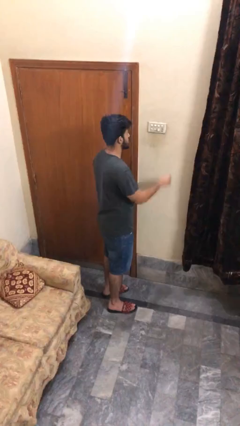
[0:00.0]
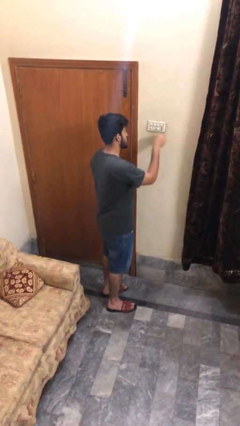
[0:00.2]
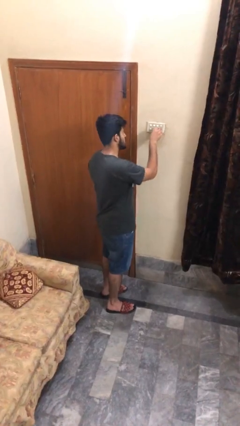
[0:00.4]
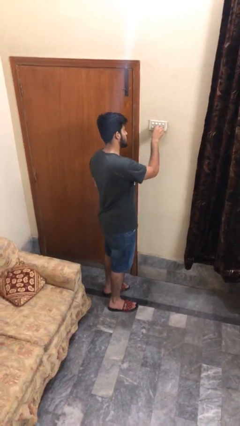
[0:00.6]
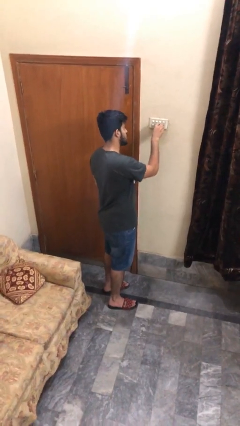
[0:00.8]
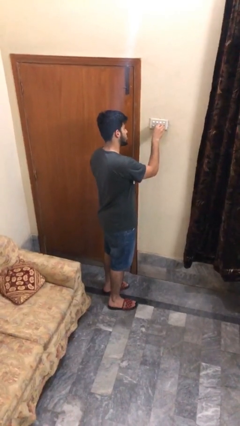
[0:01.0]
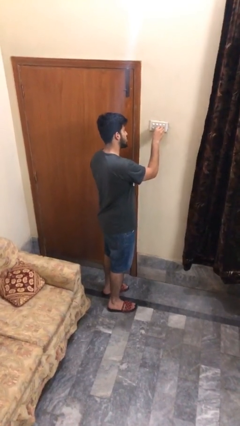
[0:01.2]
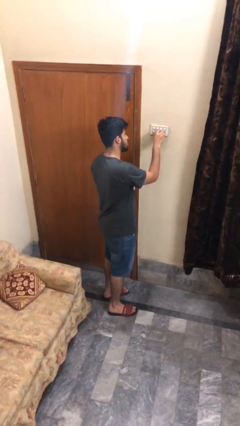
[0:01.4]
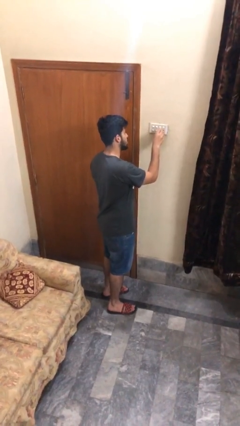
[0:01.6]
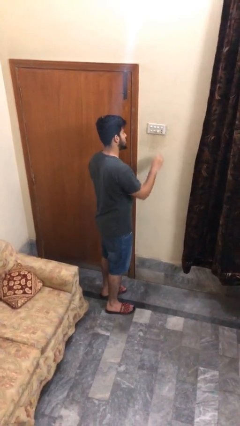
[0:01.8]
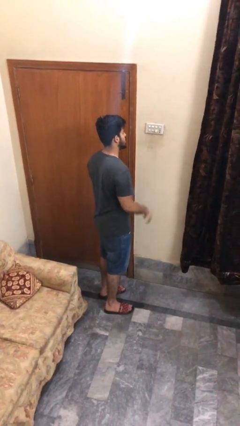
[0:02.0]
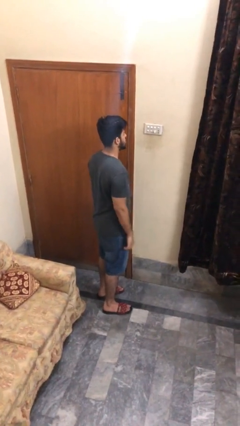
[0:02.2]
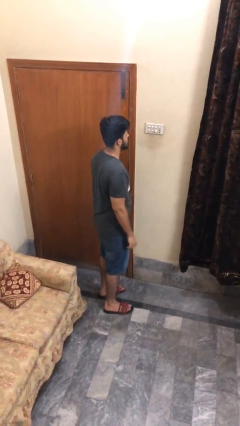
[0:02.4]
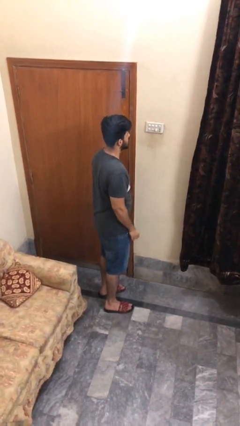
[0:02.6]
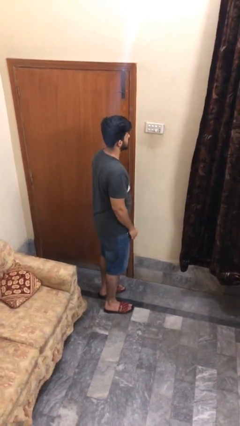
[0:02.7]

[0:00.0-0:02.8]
person adjusts thermostat

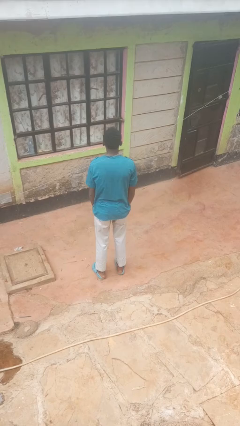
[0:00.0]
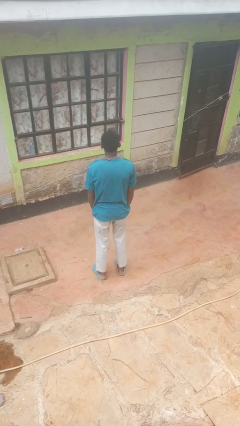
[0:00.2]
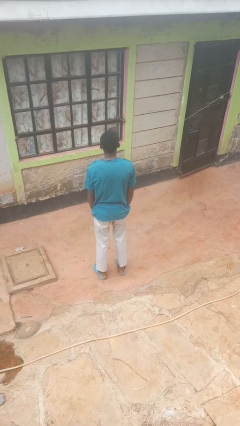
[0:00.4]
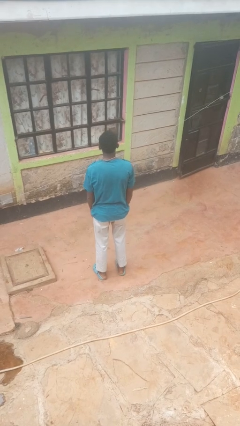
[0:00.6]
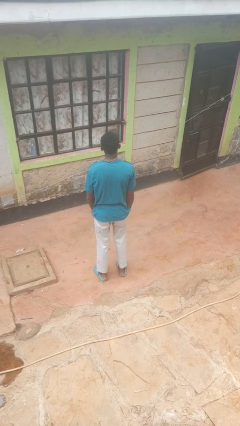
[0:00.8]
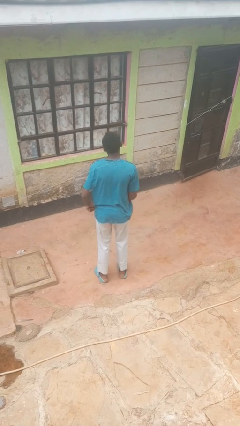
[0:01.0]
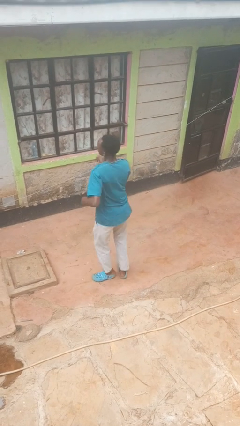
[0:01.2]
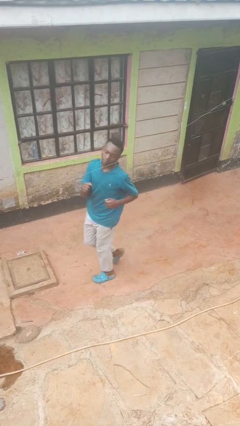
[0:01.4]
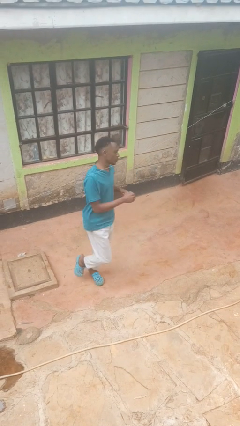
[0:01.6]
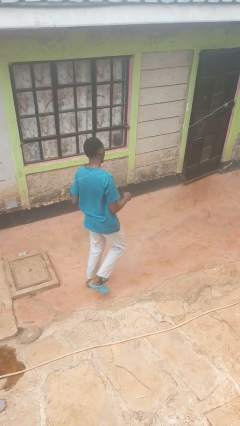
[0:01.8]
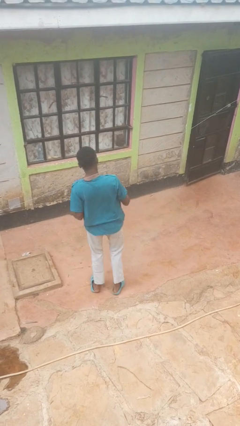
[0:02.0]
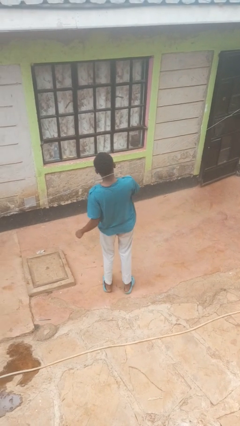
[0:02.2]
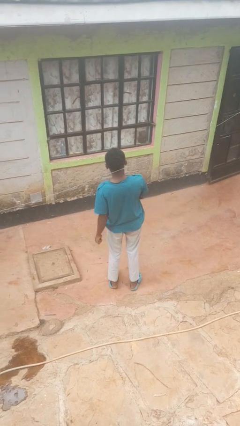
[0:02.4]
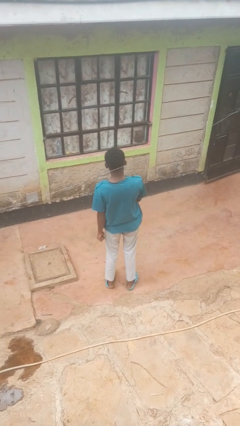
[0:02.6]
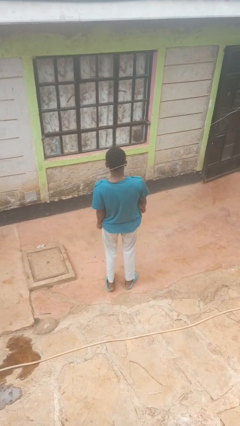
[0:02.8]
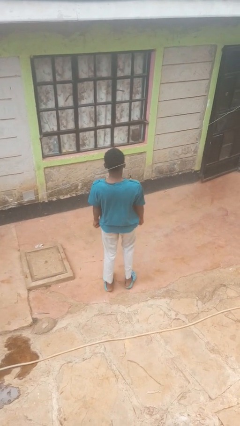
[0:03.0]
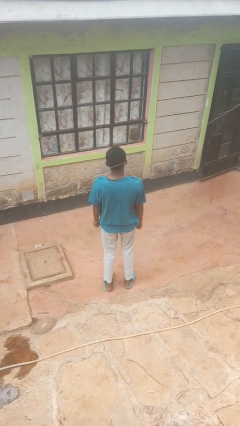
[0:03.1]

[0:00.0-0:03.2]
person twirls

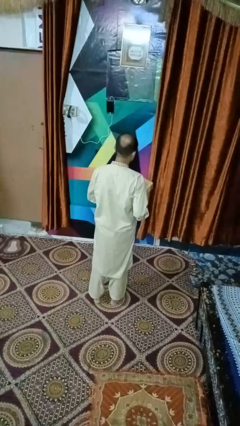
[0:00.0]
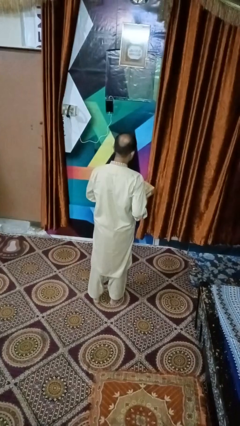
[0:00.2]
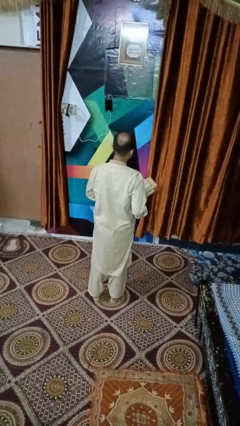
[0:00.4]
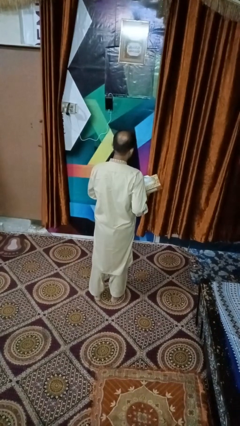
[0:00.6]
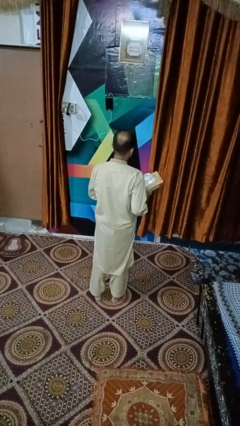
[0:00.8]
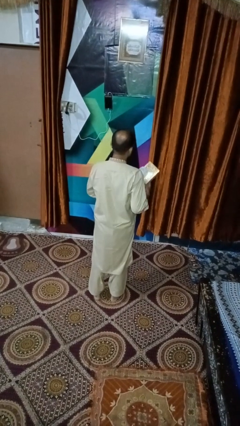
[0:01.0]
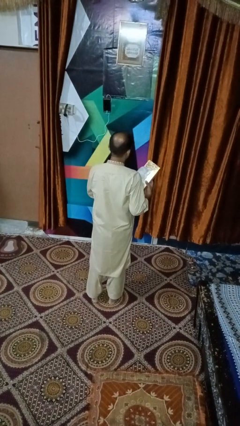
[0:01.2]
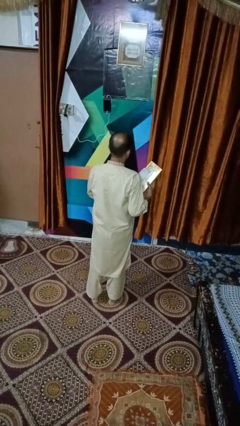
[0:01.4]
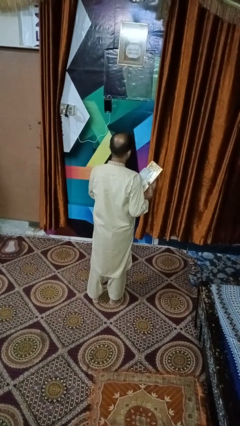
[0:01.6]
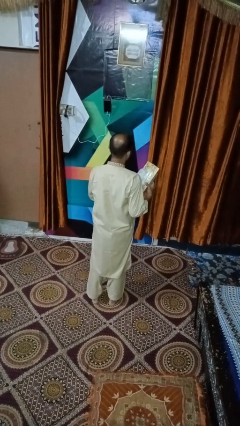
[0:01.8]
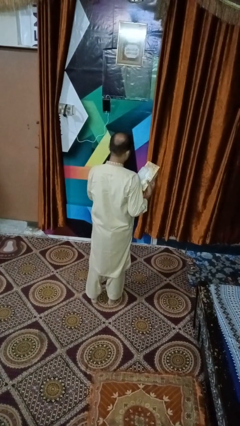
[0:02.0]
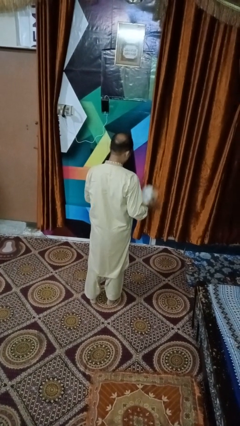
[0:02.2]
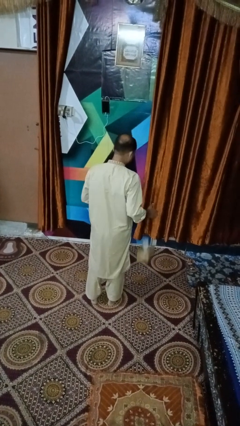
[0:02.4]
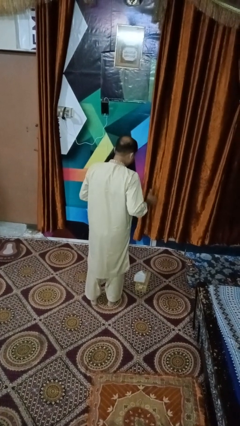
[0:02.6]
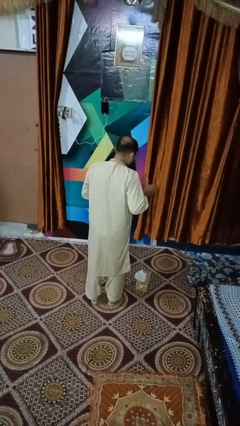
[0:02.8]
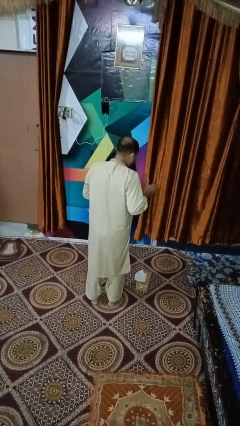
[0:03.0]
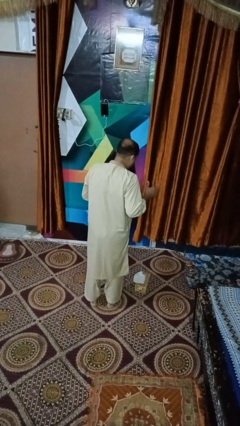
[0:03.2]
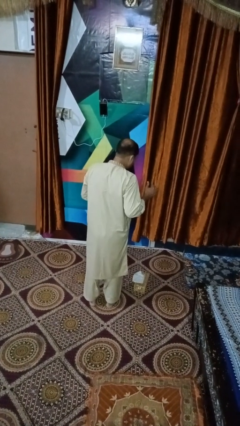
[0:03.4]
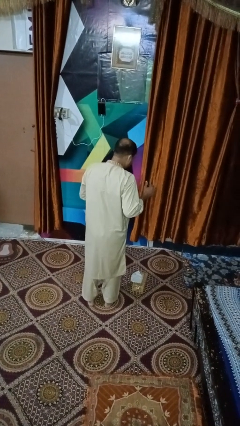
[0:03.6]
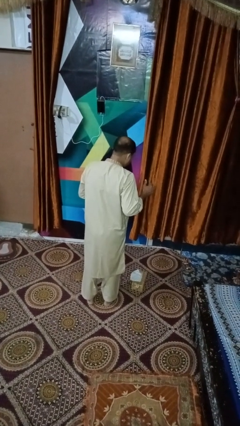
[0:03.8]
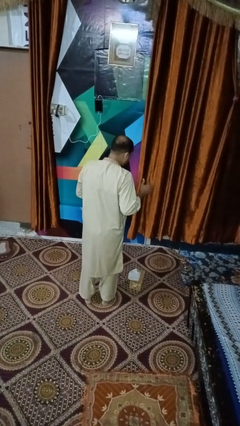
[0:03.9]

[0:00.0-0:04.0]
person drops object

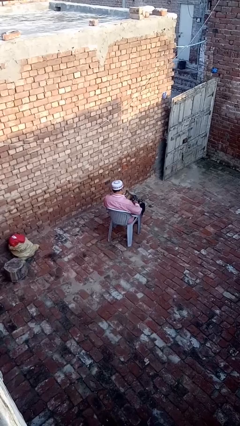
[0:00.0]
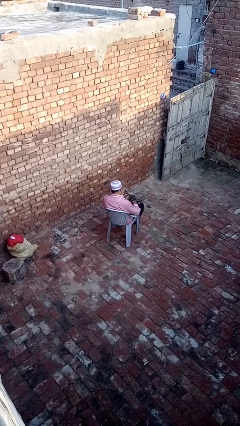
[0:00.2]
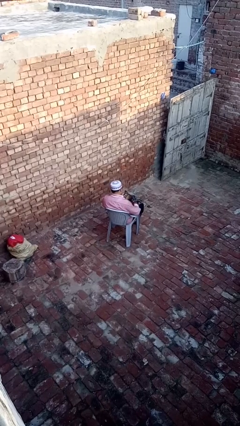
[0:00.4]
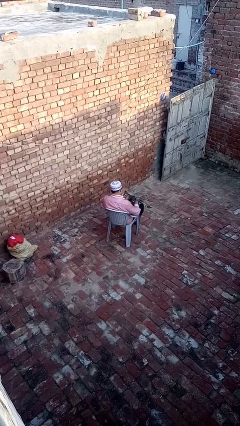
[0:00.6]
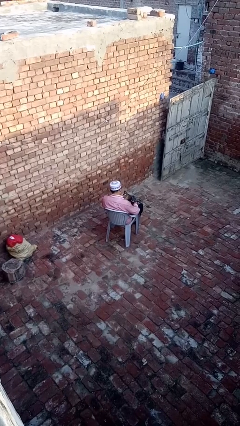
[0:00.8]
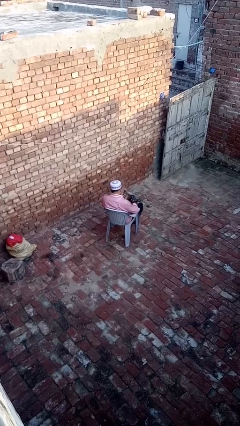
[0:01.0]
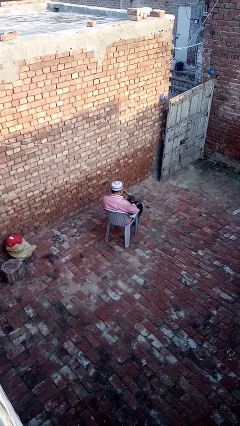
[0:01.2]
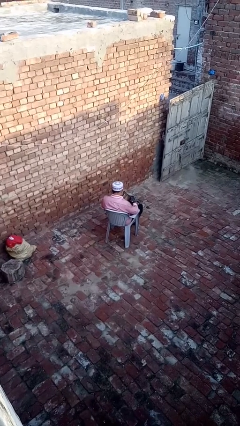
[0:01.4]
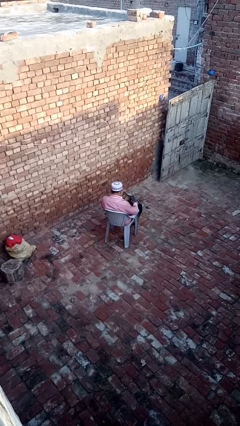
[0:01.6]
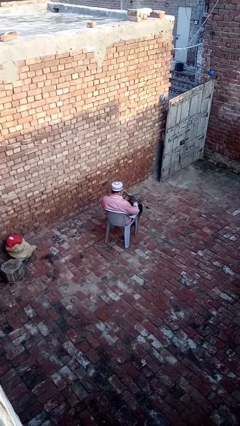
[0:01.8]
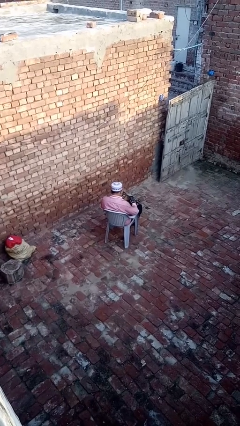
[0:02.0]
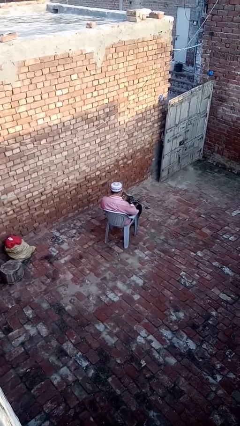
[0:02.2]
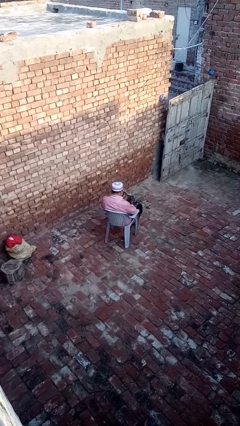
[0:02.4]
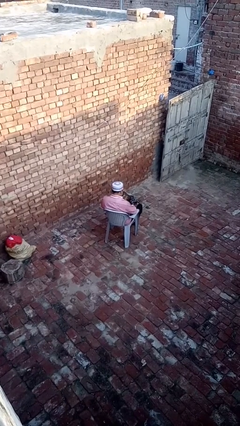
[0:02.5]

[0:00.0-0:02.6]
person searches in purse

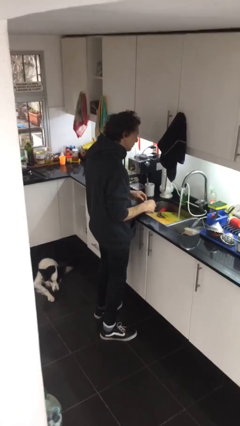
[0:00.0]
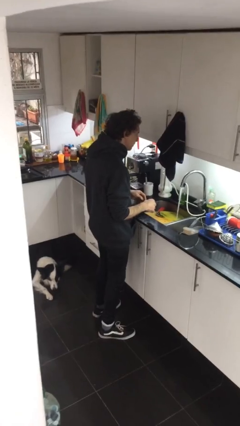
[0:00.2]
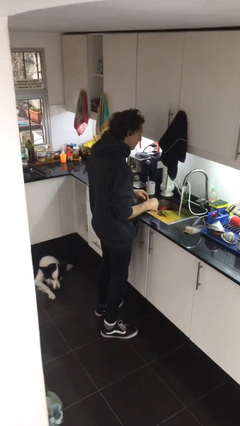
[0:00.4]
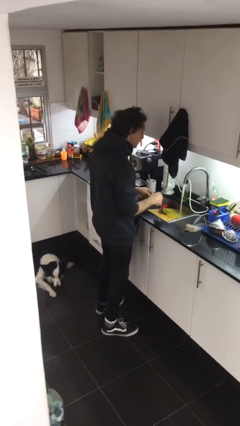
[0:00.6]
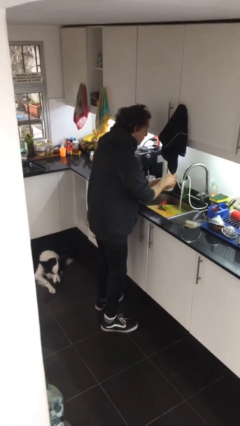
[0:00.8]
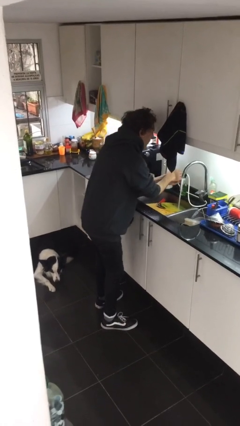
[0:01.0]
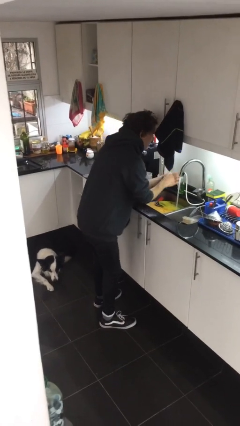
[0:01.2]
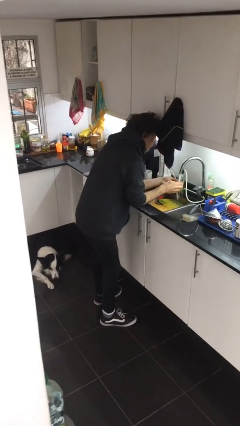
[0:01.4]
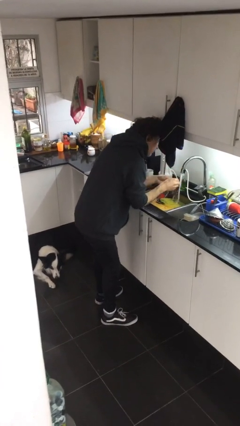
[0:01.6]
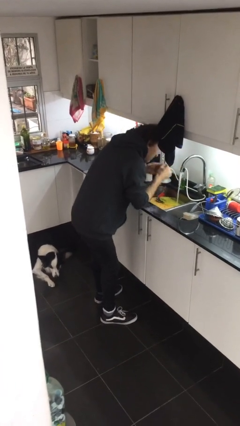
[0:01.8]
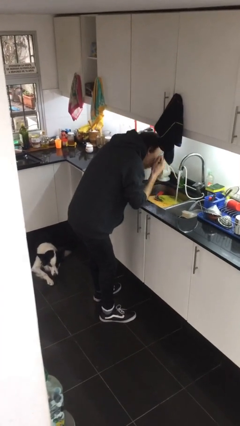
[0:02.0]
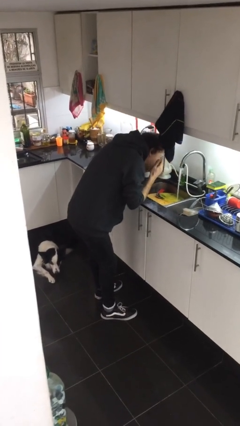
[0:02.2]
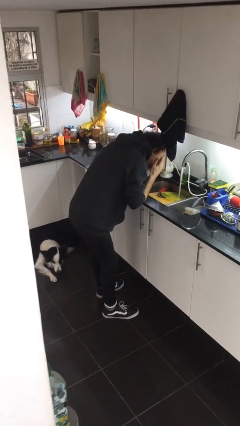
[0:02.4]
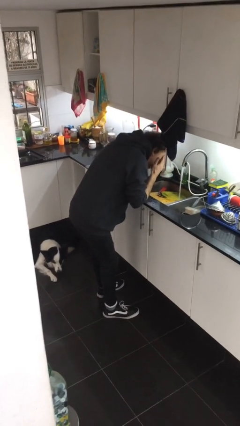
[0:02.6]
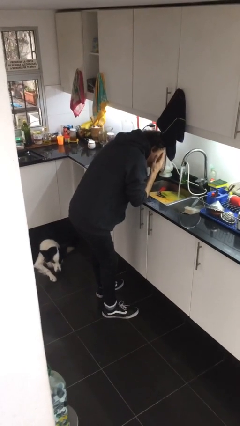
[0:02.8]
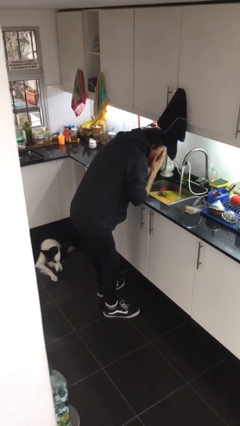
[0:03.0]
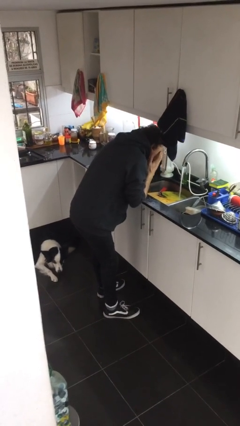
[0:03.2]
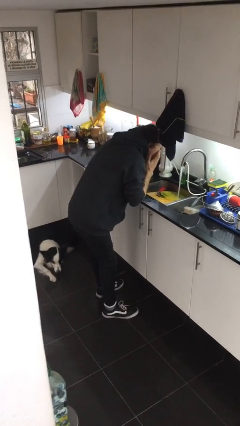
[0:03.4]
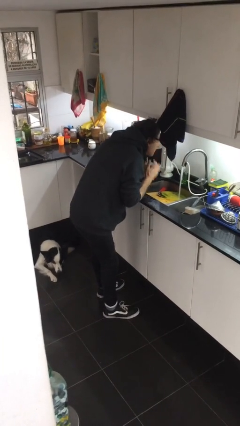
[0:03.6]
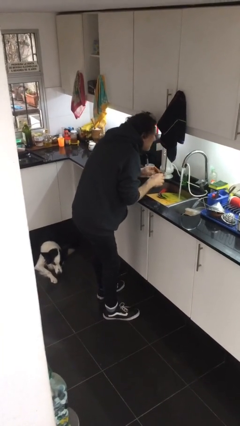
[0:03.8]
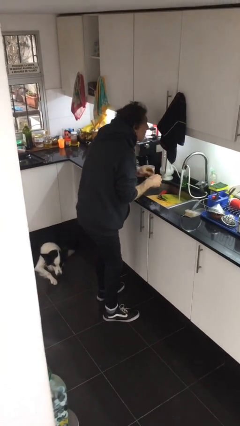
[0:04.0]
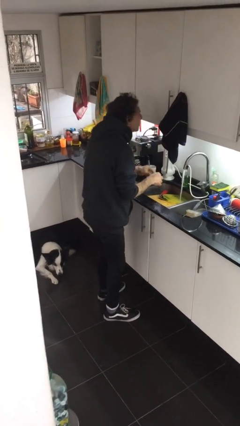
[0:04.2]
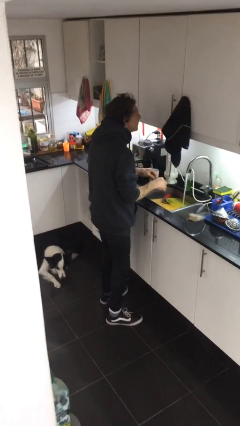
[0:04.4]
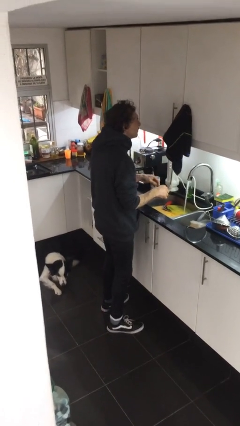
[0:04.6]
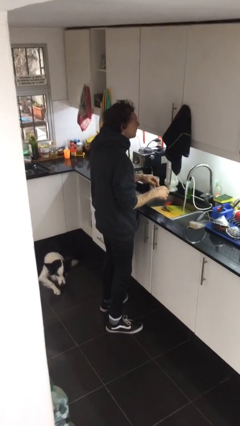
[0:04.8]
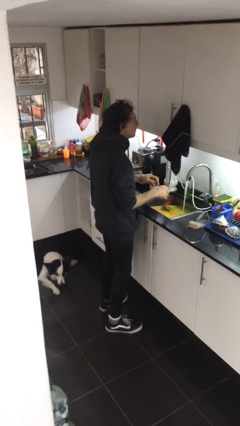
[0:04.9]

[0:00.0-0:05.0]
person washes face
